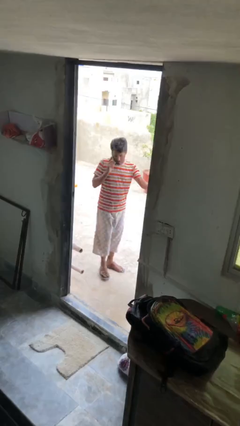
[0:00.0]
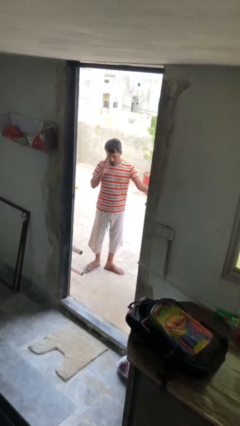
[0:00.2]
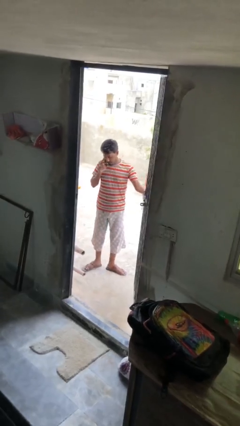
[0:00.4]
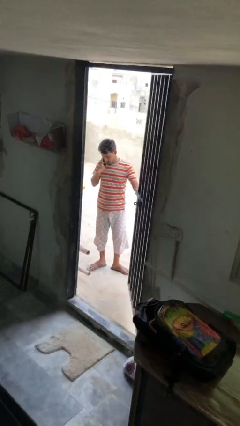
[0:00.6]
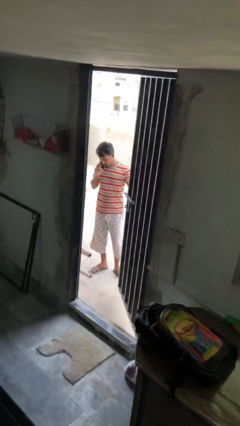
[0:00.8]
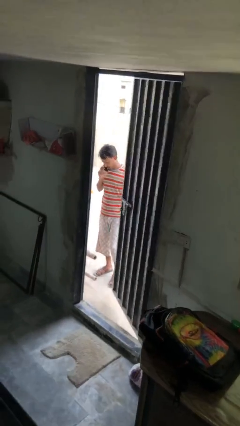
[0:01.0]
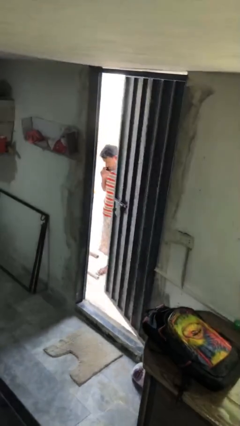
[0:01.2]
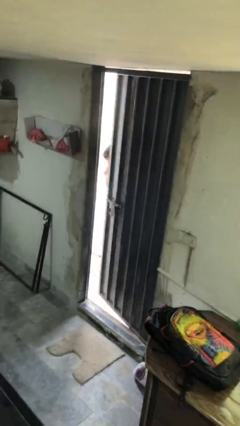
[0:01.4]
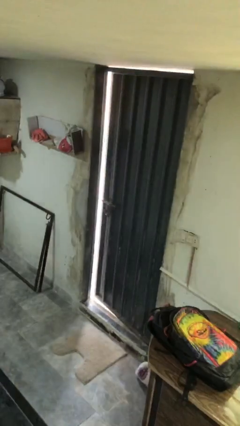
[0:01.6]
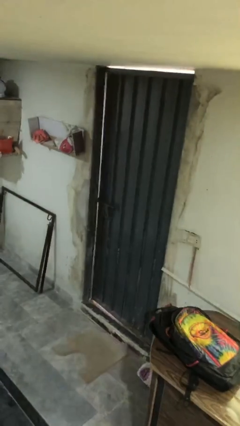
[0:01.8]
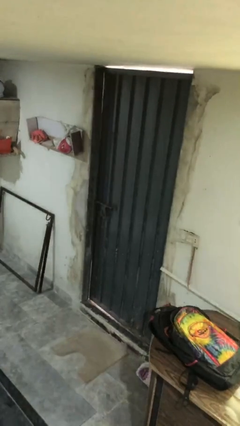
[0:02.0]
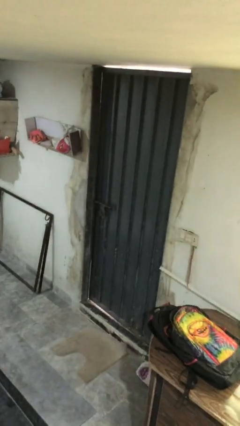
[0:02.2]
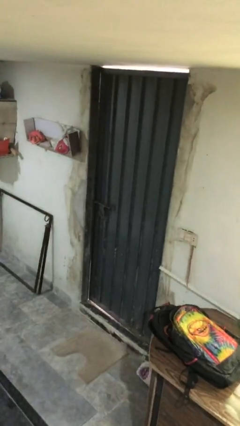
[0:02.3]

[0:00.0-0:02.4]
person closes facility door

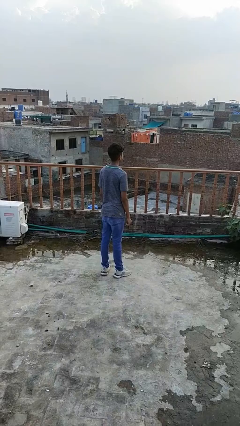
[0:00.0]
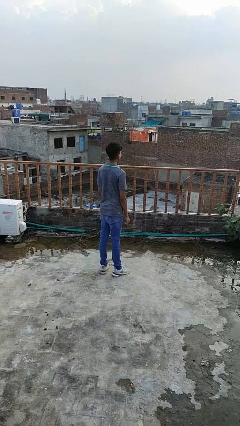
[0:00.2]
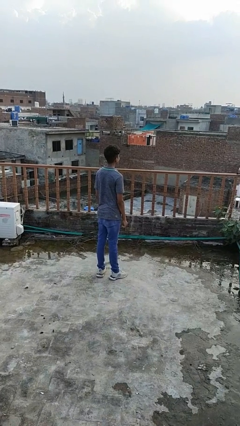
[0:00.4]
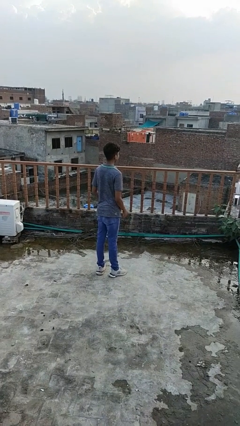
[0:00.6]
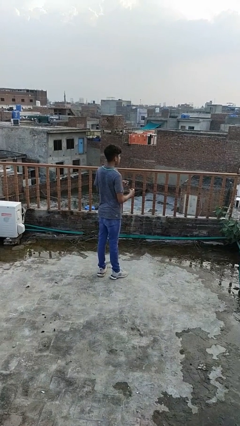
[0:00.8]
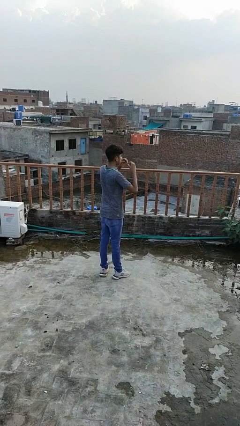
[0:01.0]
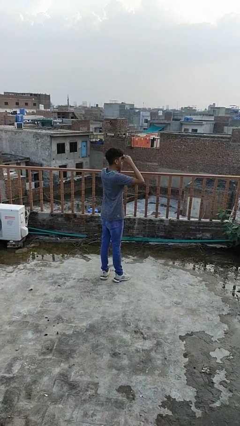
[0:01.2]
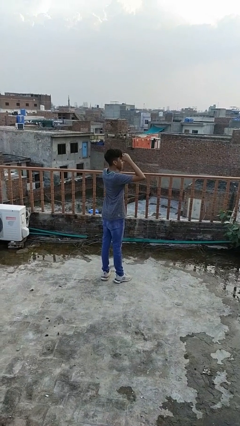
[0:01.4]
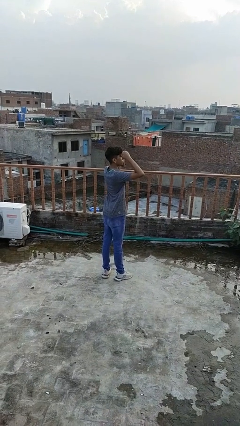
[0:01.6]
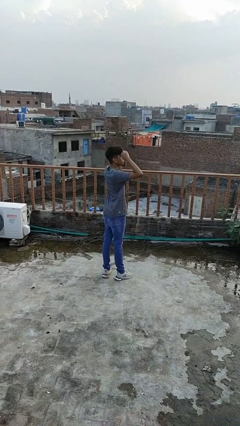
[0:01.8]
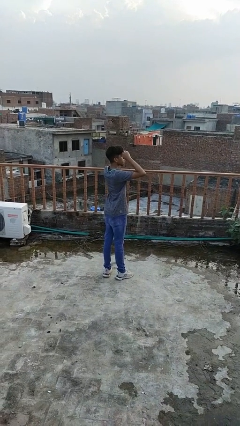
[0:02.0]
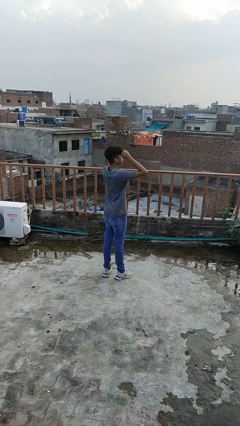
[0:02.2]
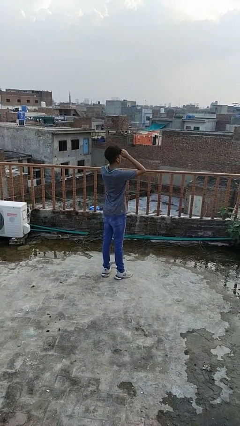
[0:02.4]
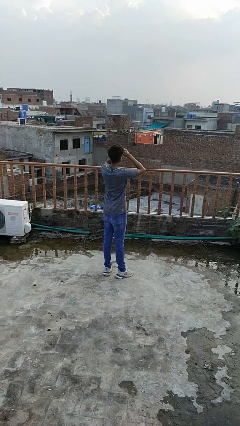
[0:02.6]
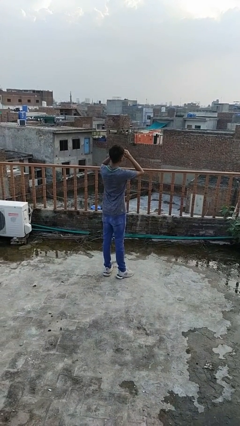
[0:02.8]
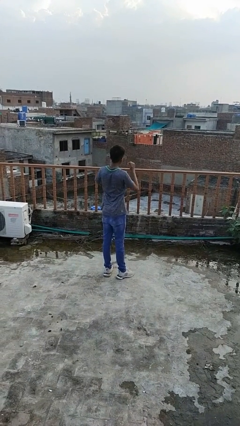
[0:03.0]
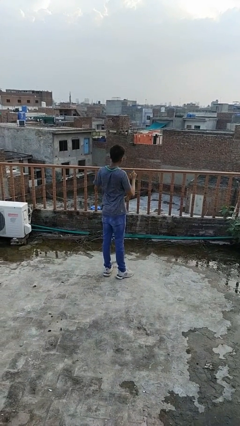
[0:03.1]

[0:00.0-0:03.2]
person shades eyes

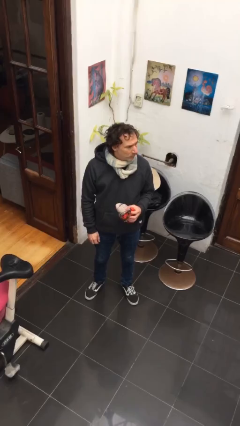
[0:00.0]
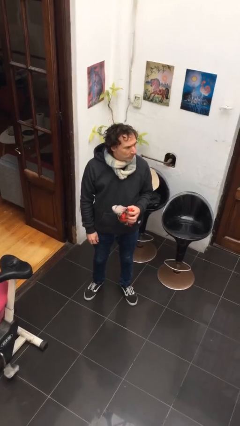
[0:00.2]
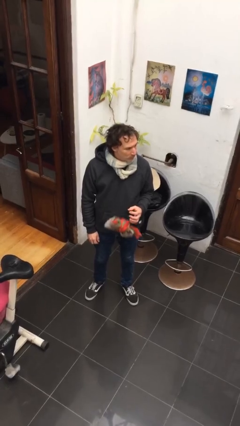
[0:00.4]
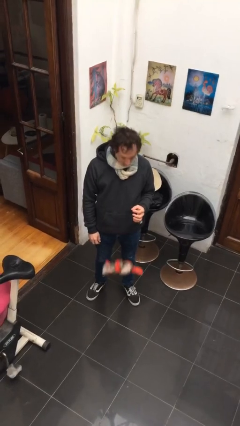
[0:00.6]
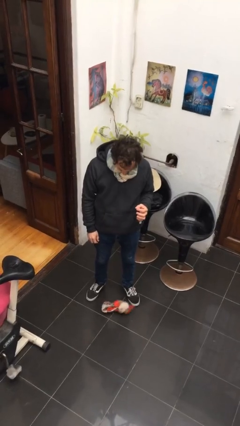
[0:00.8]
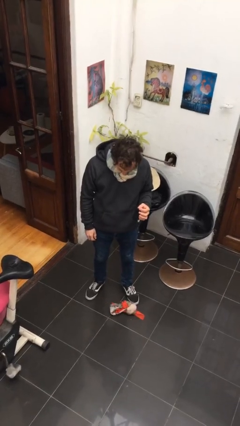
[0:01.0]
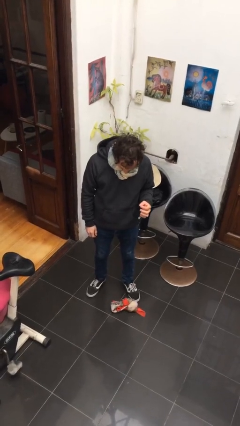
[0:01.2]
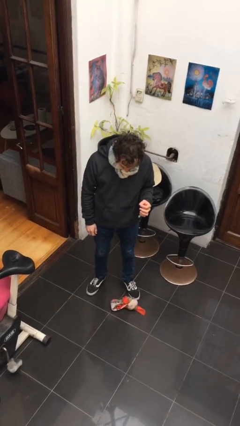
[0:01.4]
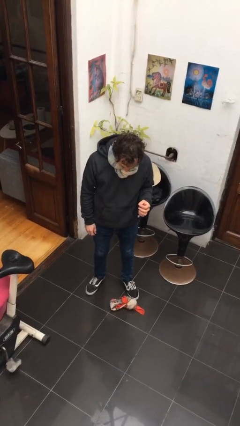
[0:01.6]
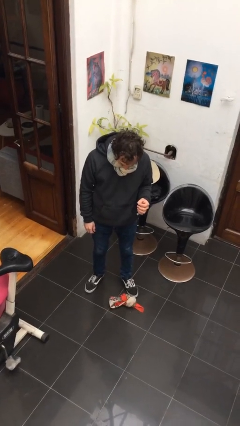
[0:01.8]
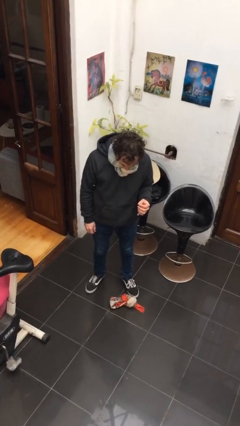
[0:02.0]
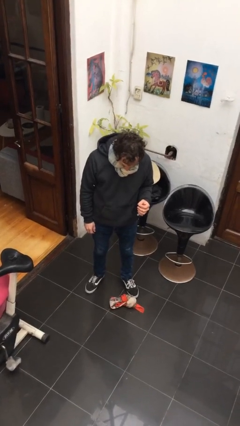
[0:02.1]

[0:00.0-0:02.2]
person drops object

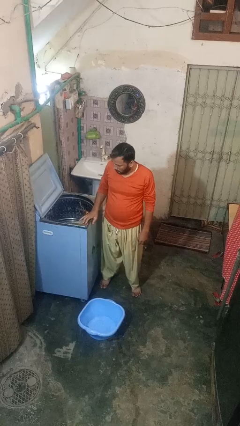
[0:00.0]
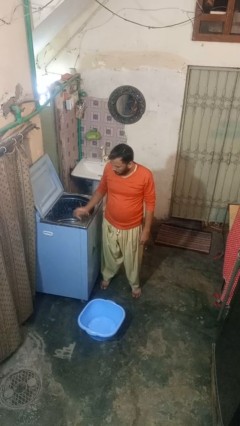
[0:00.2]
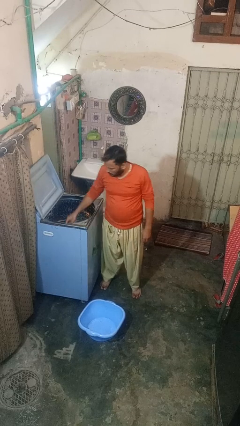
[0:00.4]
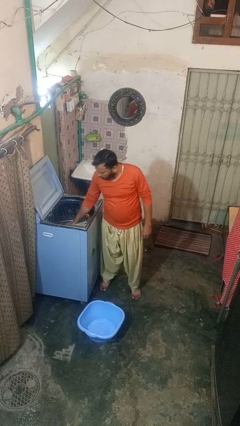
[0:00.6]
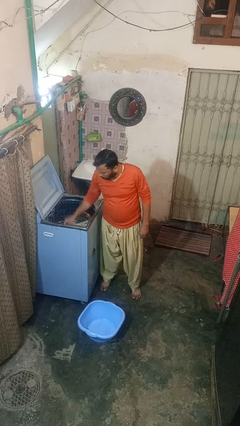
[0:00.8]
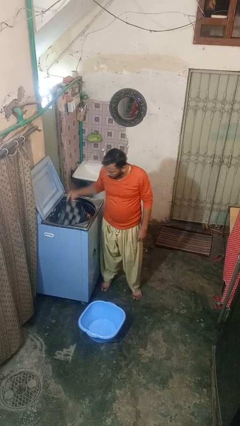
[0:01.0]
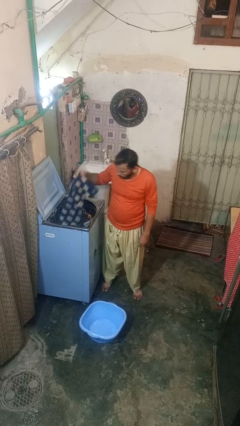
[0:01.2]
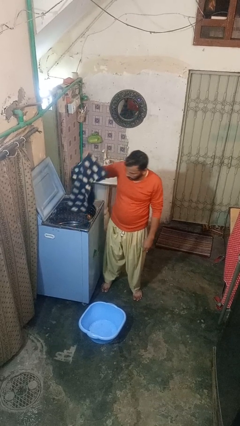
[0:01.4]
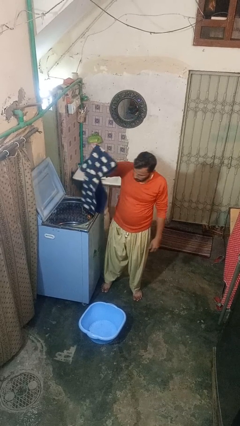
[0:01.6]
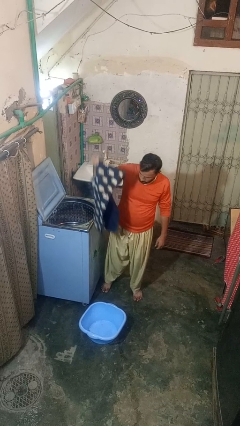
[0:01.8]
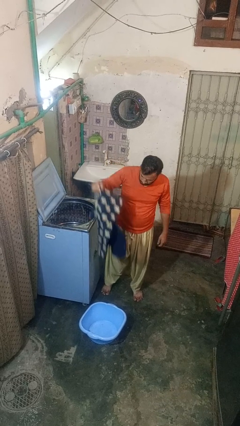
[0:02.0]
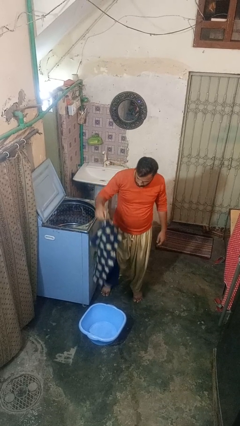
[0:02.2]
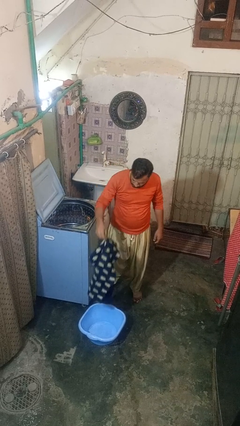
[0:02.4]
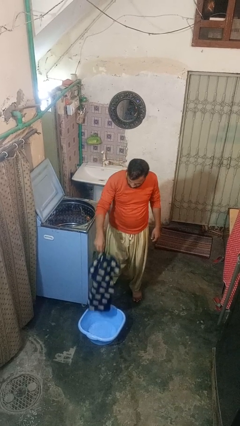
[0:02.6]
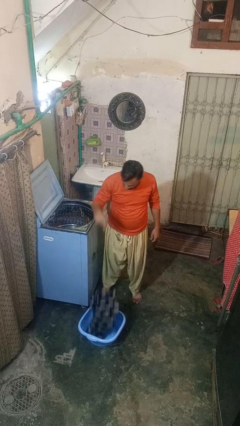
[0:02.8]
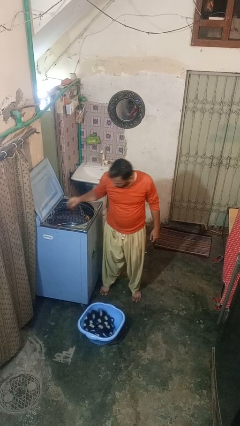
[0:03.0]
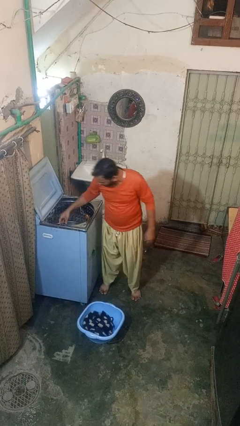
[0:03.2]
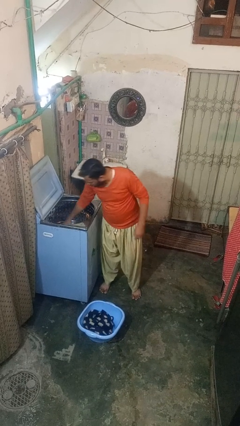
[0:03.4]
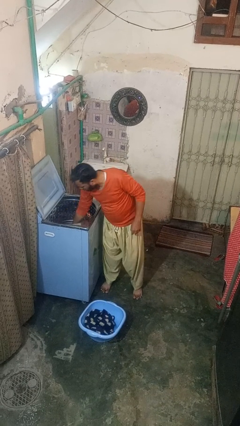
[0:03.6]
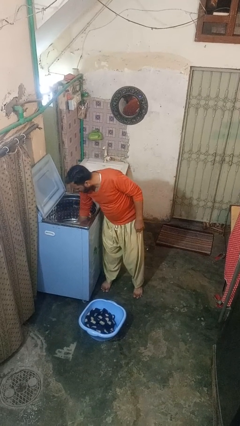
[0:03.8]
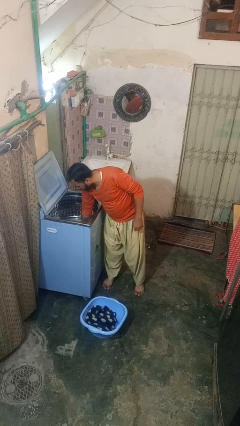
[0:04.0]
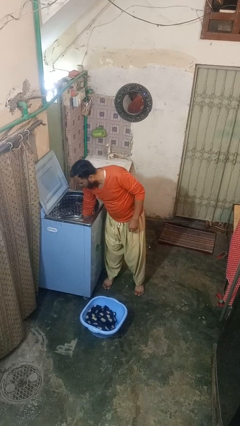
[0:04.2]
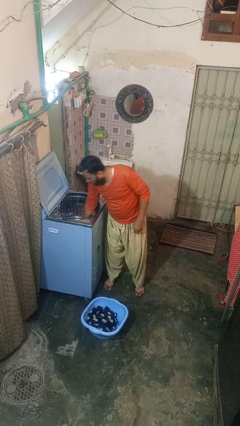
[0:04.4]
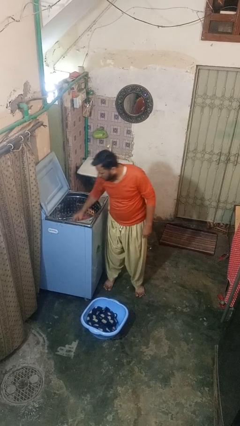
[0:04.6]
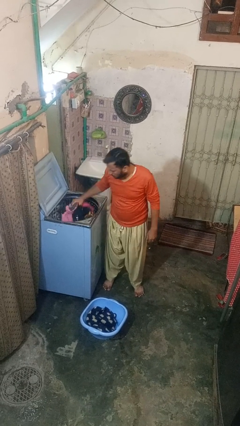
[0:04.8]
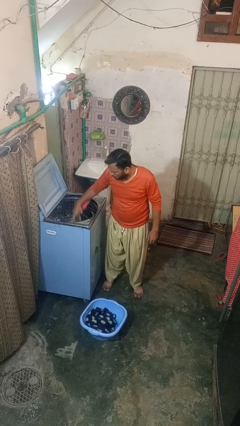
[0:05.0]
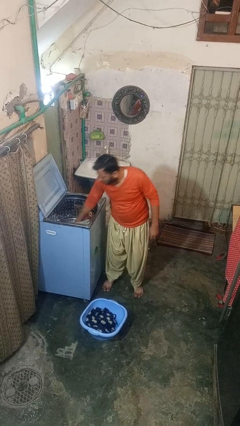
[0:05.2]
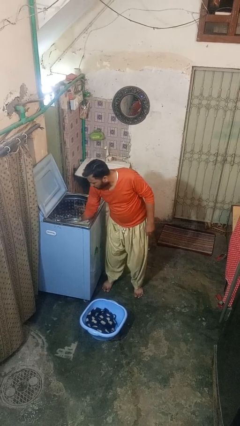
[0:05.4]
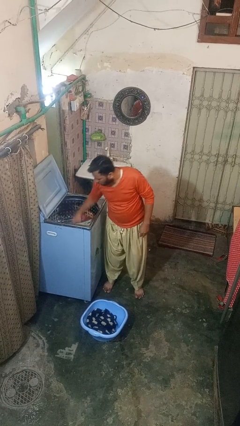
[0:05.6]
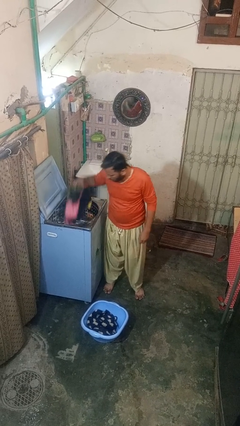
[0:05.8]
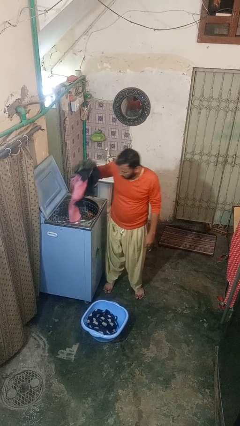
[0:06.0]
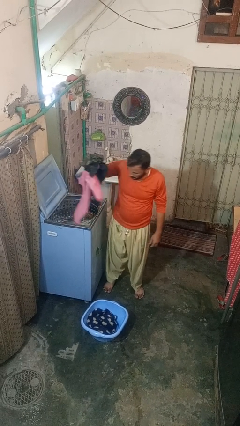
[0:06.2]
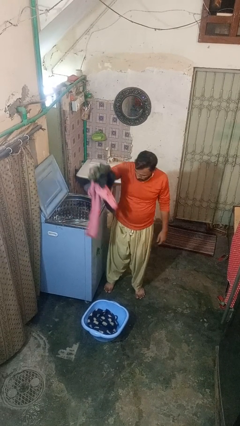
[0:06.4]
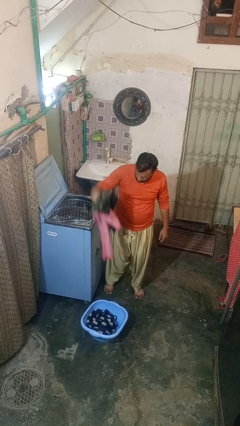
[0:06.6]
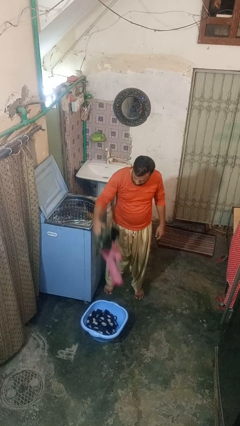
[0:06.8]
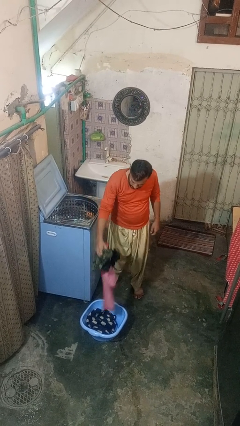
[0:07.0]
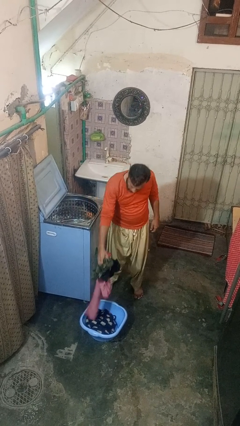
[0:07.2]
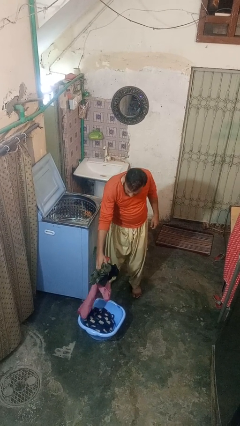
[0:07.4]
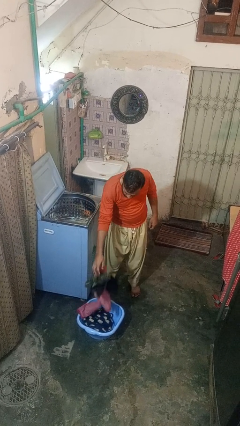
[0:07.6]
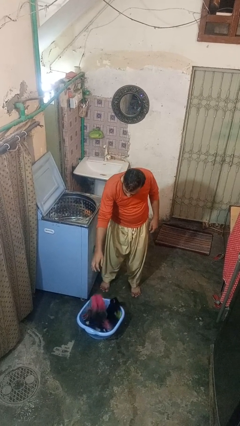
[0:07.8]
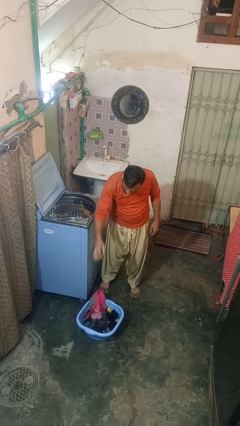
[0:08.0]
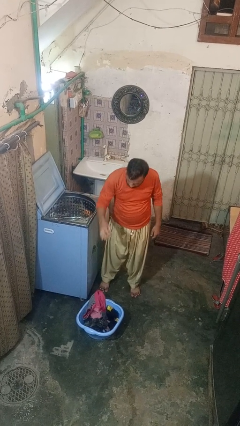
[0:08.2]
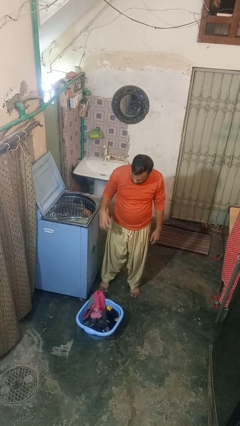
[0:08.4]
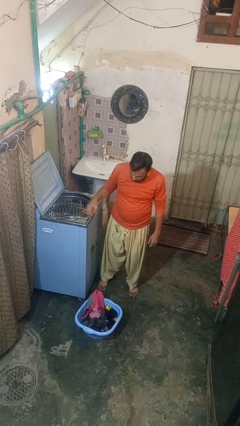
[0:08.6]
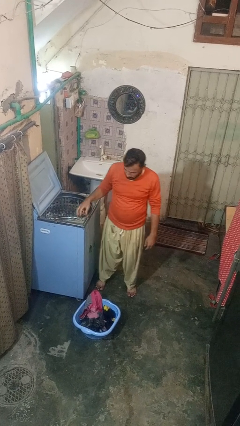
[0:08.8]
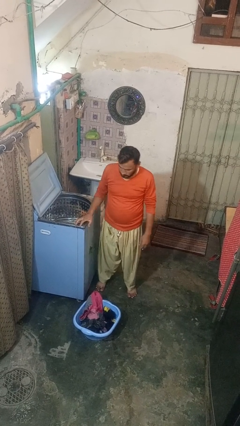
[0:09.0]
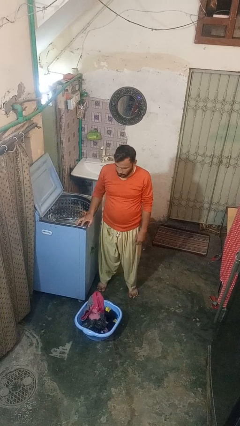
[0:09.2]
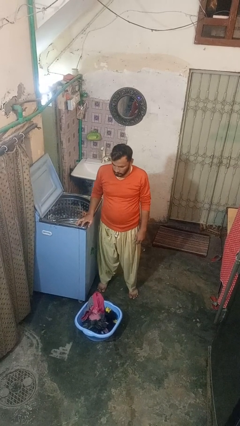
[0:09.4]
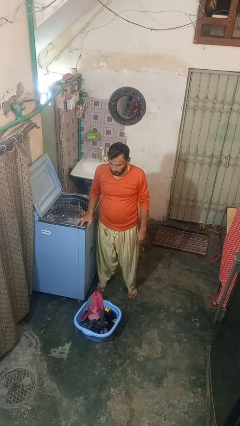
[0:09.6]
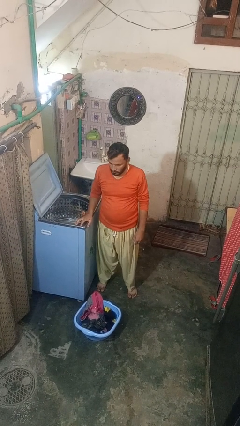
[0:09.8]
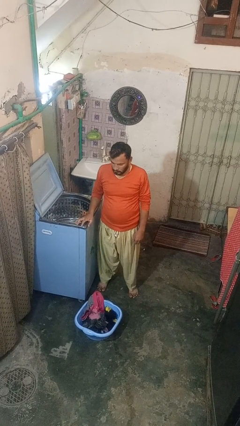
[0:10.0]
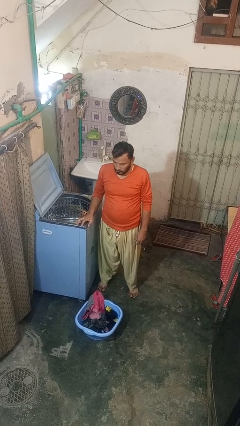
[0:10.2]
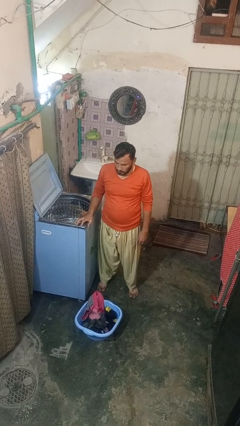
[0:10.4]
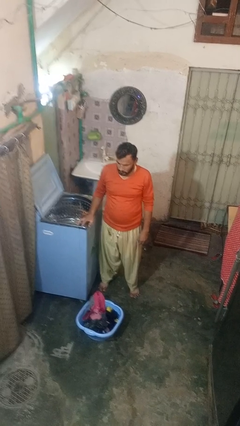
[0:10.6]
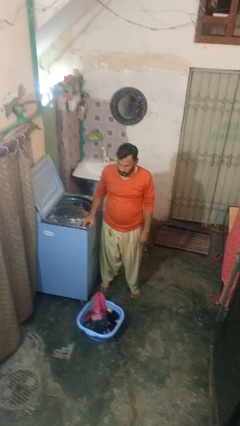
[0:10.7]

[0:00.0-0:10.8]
person unloads clotheswasher
